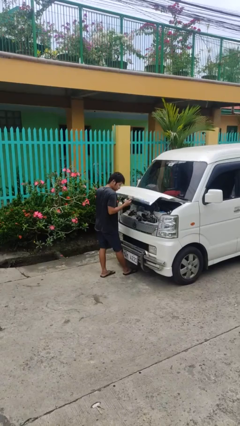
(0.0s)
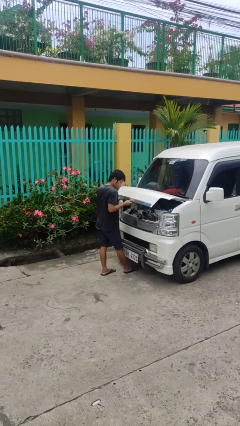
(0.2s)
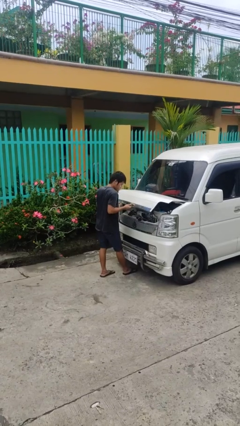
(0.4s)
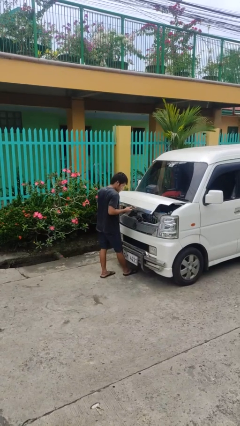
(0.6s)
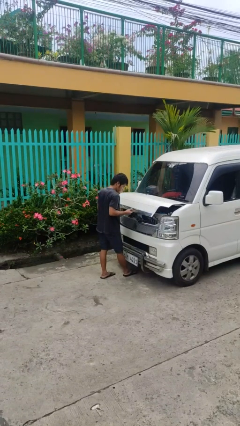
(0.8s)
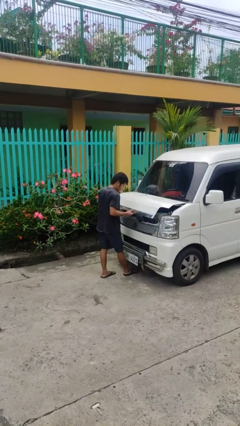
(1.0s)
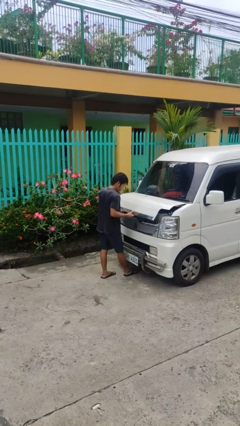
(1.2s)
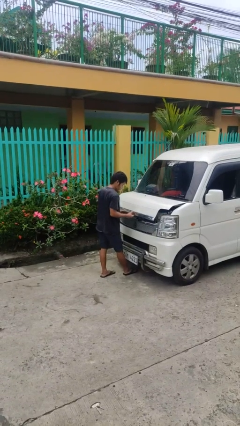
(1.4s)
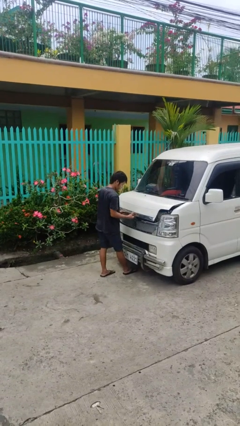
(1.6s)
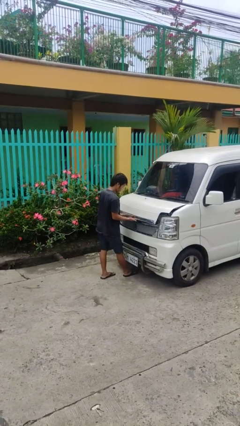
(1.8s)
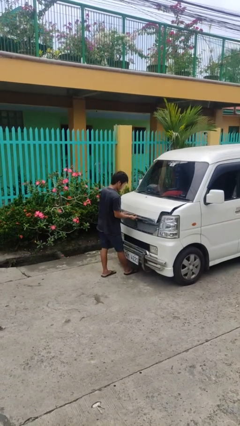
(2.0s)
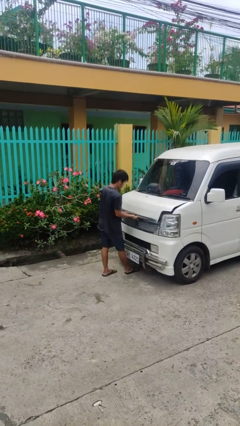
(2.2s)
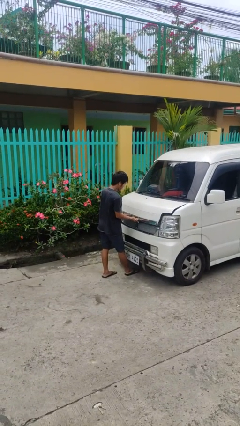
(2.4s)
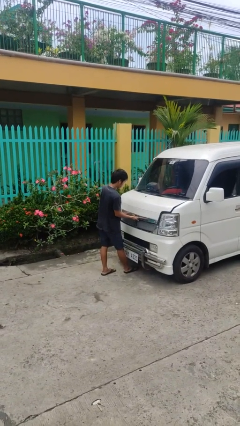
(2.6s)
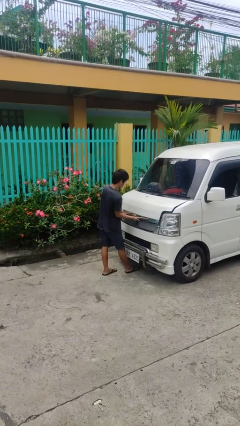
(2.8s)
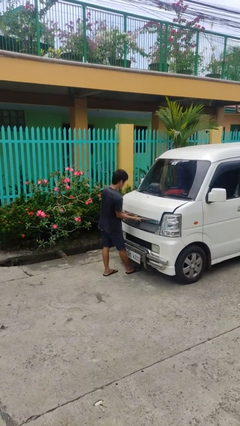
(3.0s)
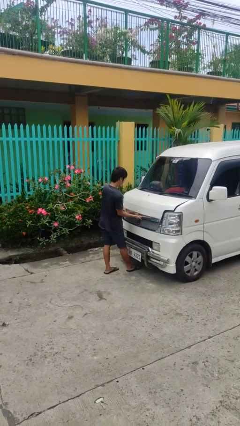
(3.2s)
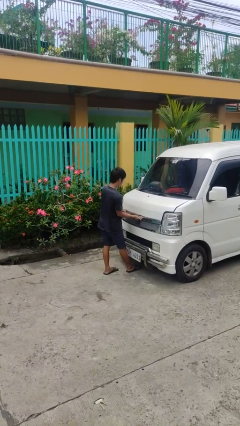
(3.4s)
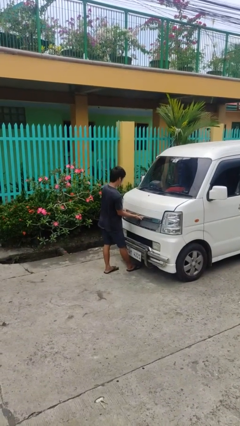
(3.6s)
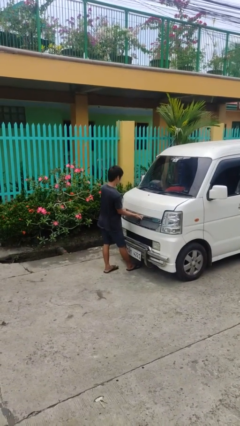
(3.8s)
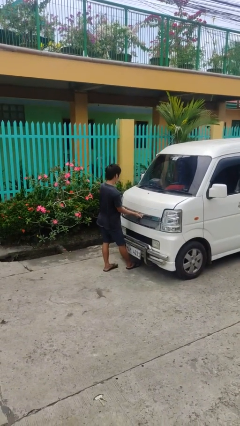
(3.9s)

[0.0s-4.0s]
person closes car hood

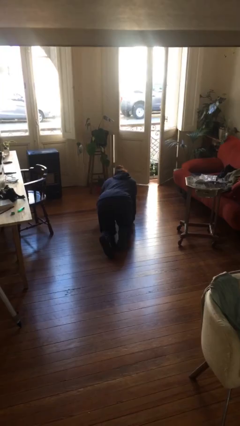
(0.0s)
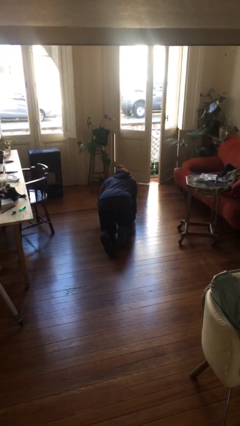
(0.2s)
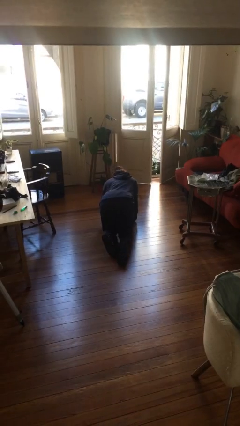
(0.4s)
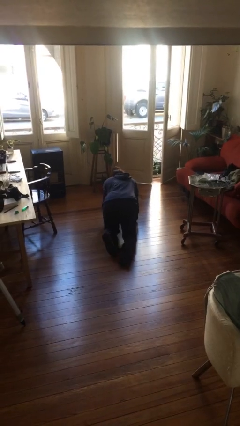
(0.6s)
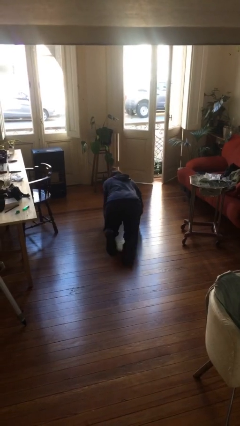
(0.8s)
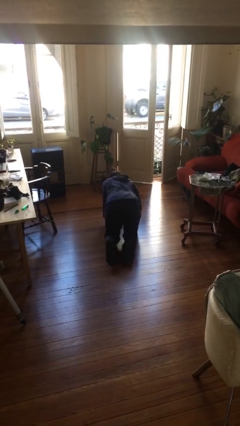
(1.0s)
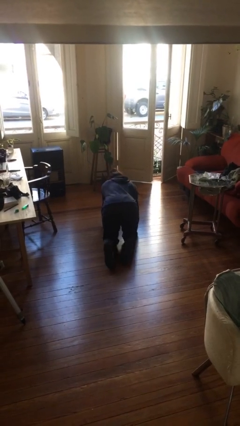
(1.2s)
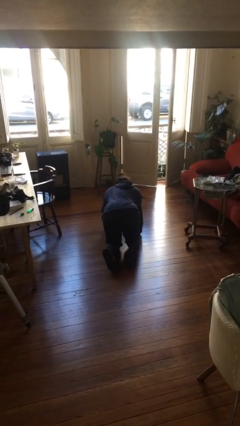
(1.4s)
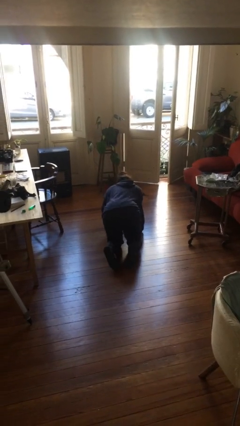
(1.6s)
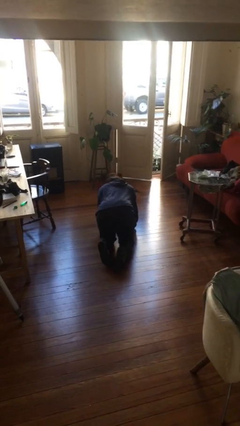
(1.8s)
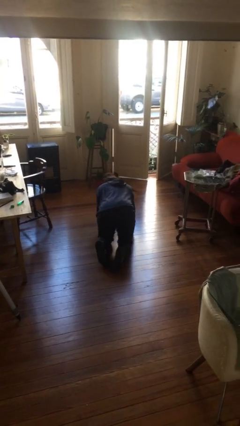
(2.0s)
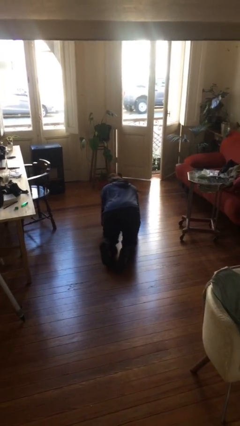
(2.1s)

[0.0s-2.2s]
person crawls

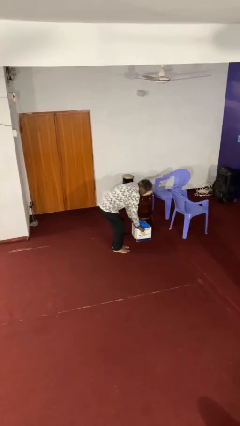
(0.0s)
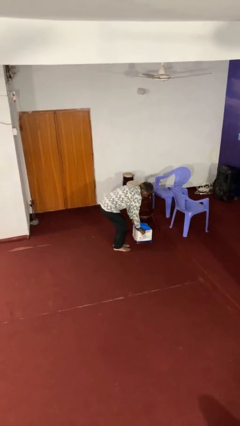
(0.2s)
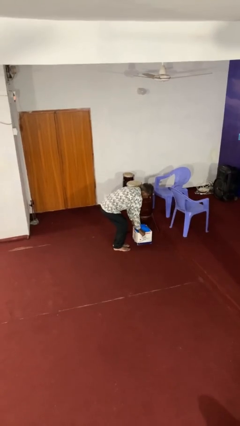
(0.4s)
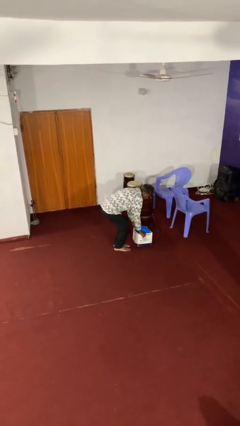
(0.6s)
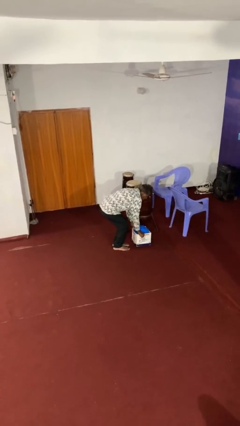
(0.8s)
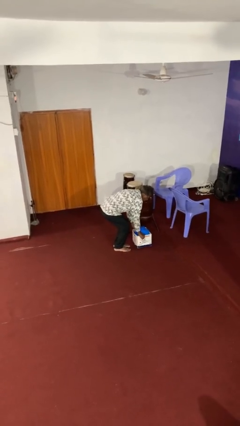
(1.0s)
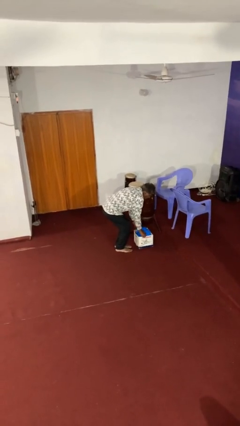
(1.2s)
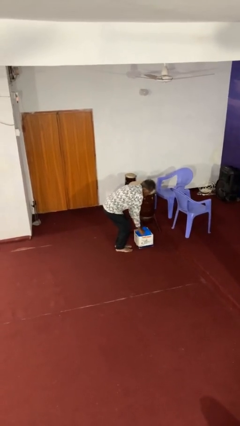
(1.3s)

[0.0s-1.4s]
person puts down object on floor

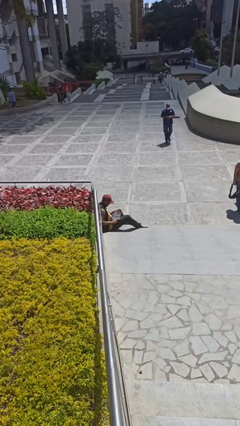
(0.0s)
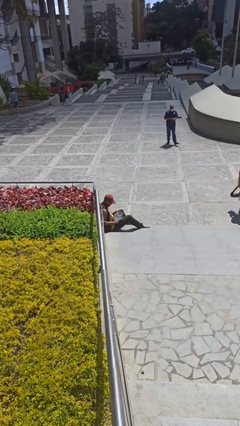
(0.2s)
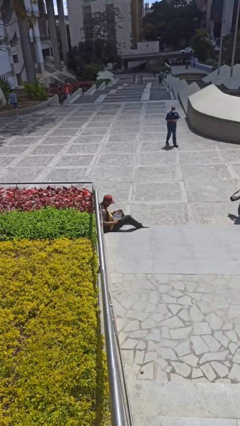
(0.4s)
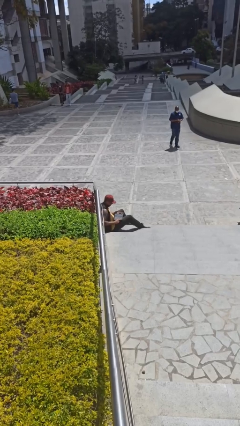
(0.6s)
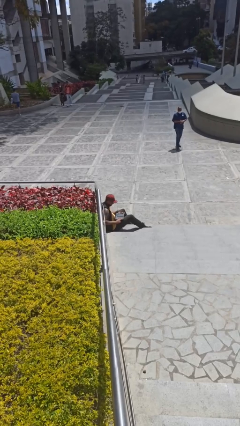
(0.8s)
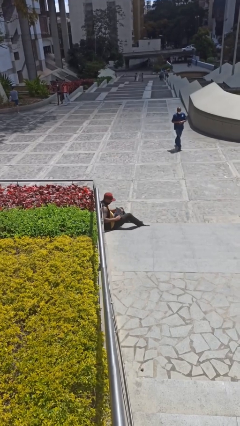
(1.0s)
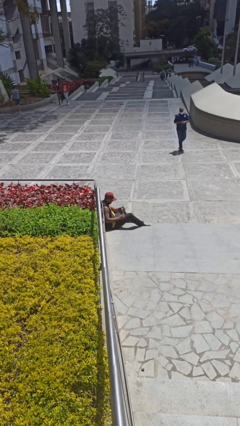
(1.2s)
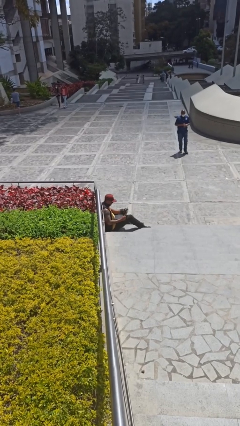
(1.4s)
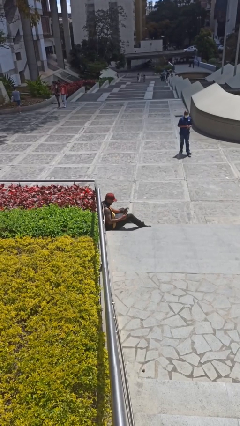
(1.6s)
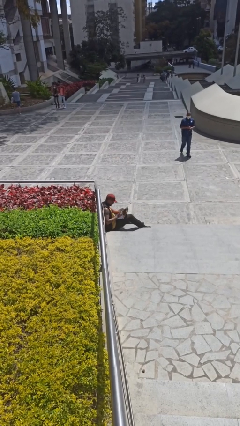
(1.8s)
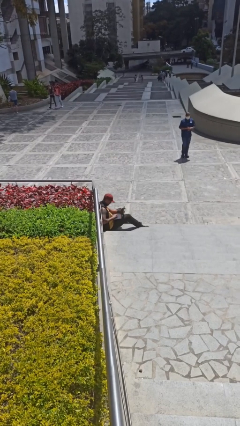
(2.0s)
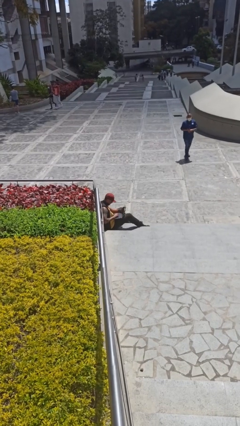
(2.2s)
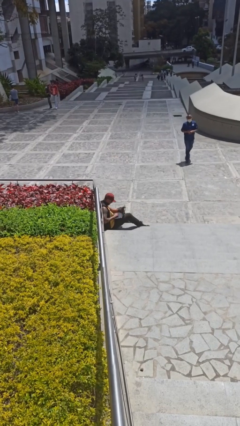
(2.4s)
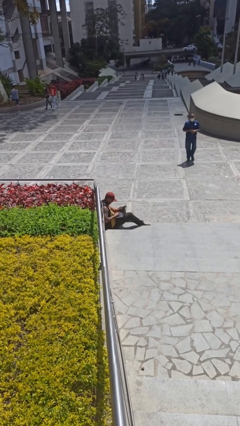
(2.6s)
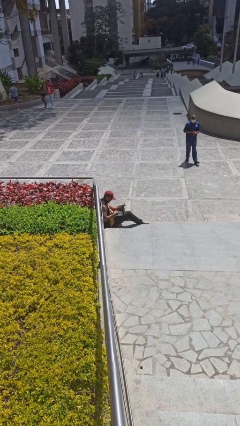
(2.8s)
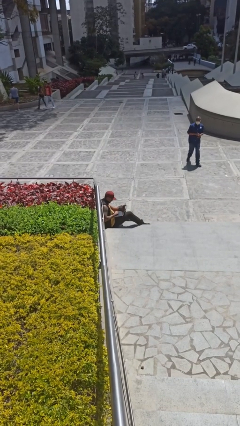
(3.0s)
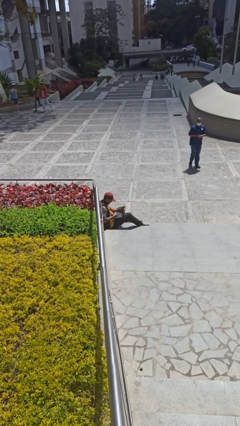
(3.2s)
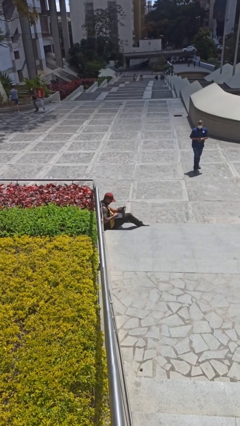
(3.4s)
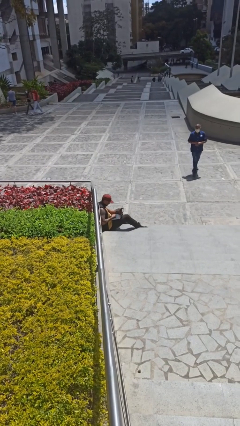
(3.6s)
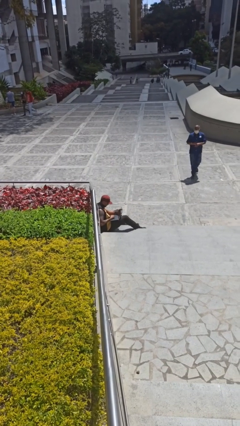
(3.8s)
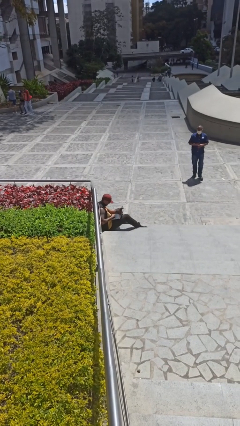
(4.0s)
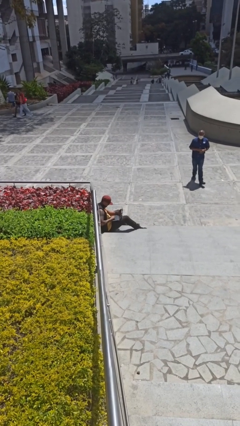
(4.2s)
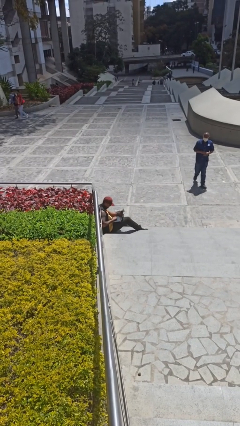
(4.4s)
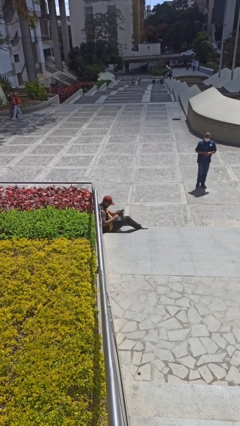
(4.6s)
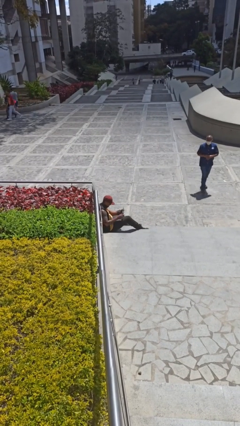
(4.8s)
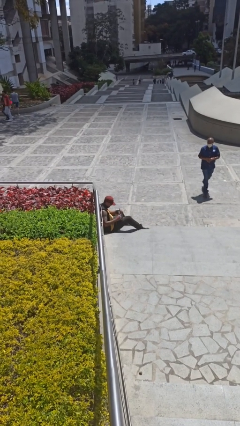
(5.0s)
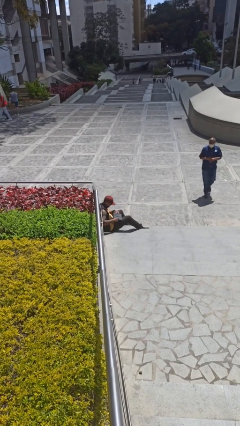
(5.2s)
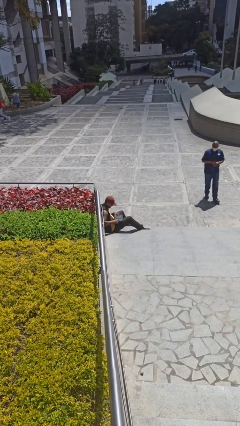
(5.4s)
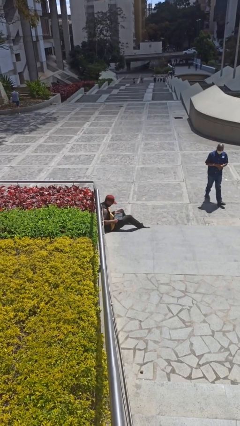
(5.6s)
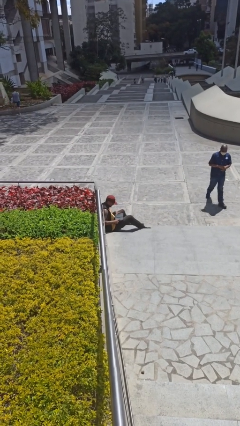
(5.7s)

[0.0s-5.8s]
person interacts with laptop

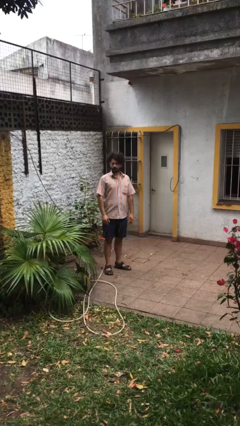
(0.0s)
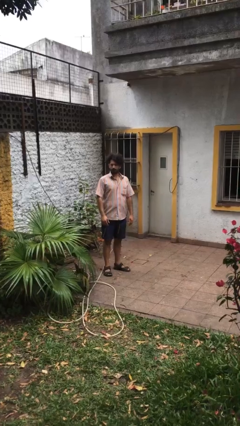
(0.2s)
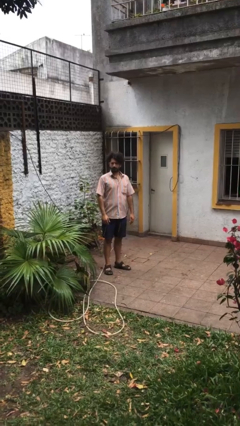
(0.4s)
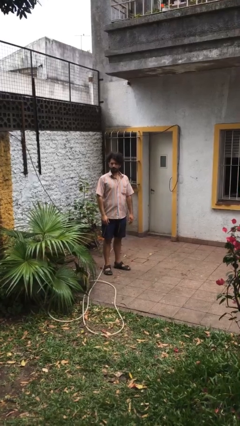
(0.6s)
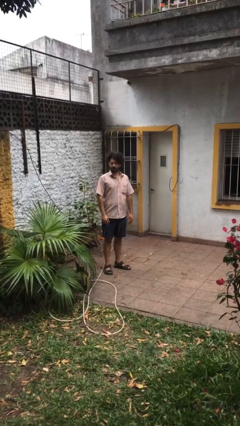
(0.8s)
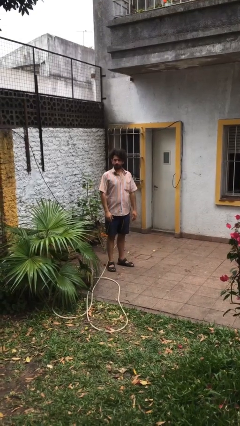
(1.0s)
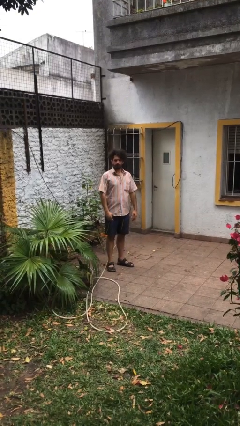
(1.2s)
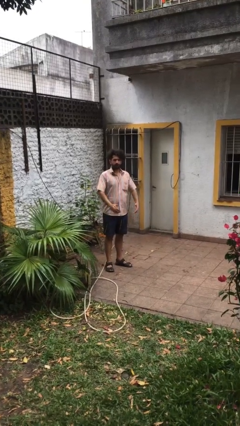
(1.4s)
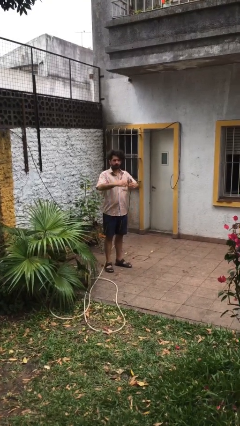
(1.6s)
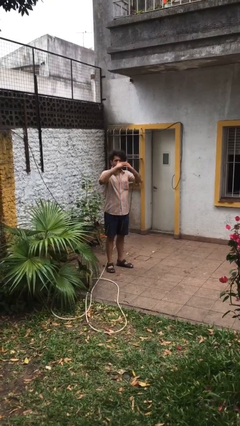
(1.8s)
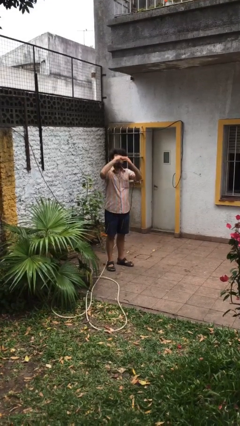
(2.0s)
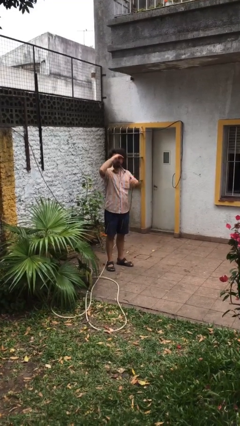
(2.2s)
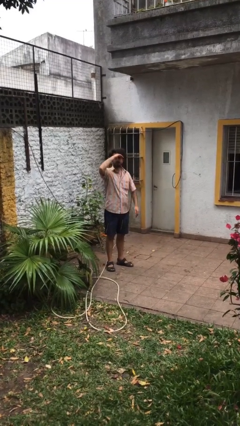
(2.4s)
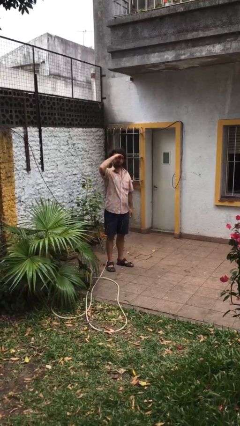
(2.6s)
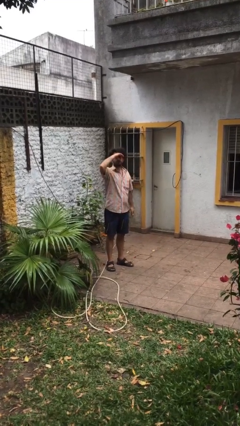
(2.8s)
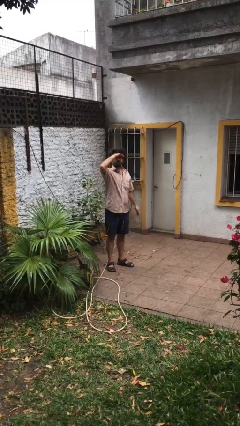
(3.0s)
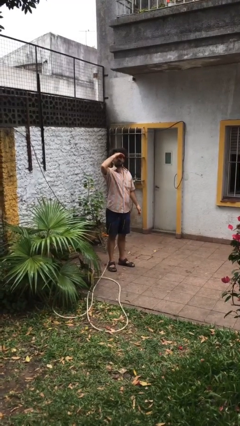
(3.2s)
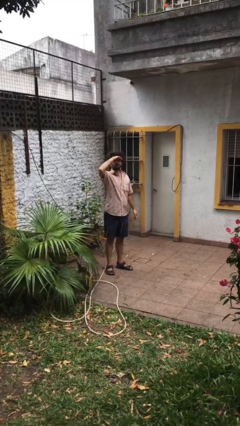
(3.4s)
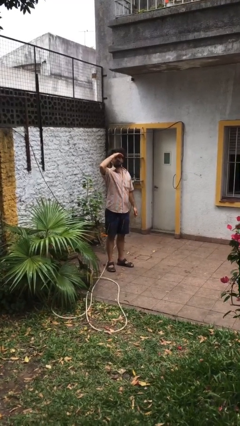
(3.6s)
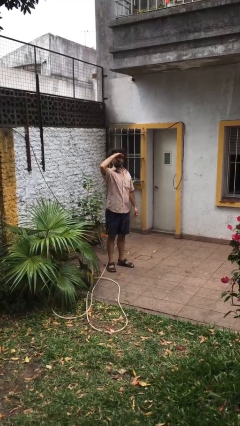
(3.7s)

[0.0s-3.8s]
person shades eyes

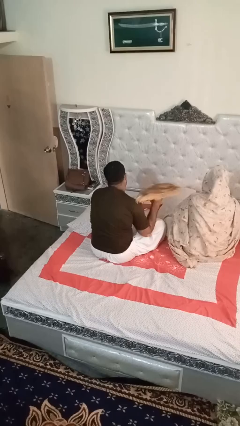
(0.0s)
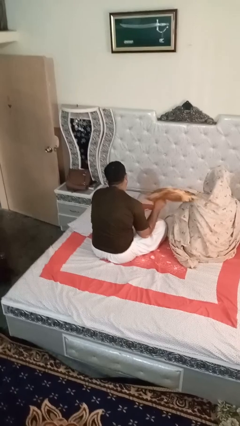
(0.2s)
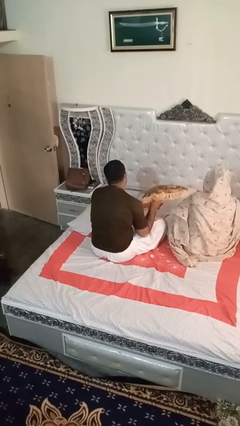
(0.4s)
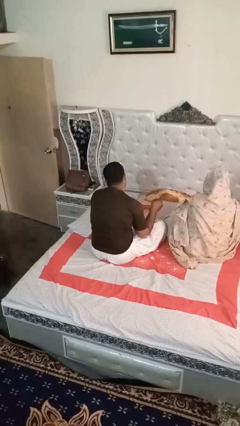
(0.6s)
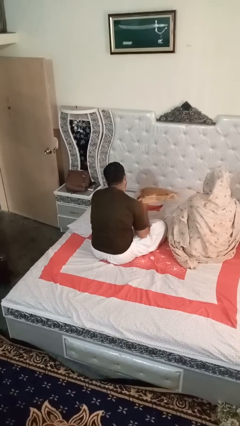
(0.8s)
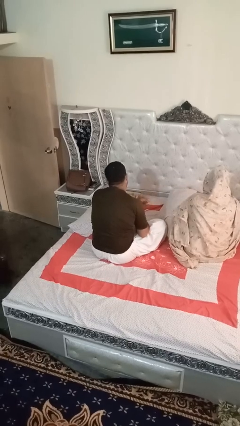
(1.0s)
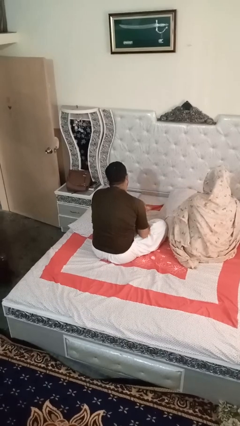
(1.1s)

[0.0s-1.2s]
person hits person with pillow
